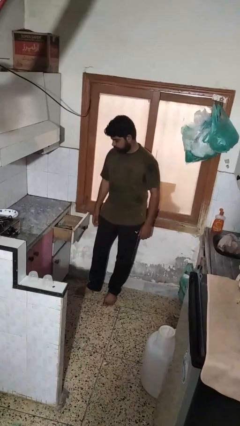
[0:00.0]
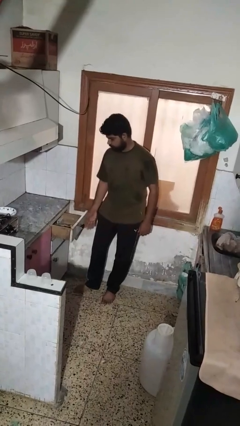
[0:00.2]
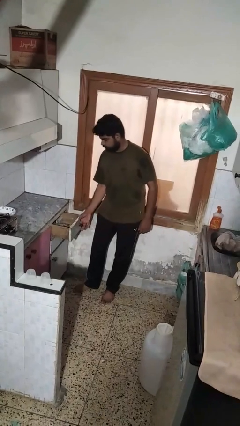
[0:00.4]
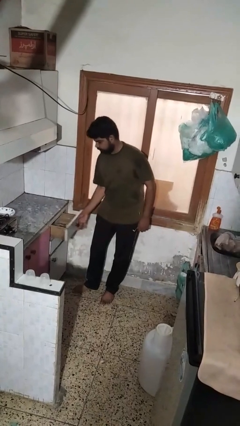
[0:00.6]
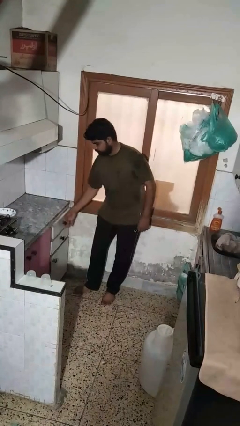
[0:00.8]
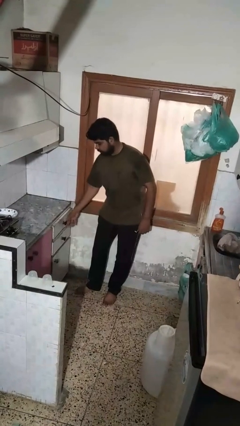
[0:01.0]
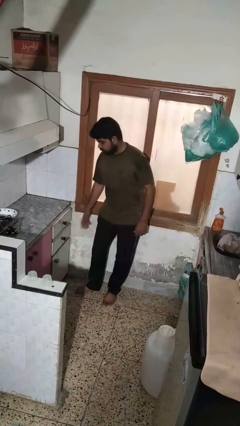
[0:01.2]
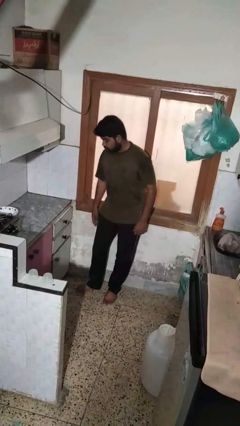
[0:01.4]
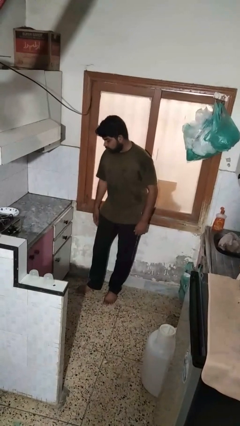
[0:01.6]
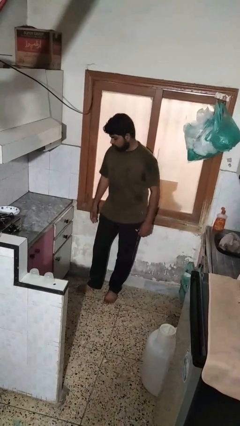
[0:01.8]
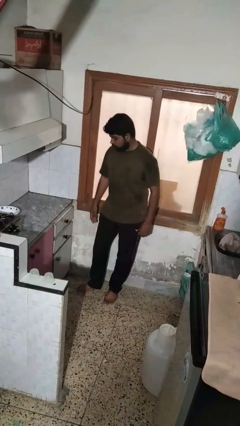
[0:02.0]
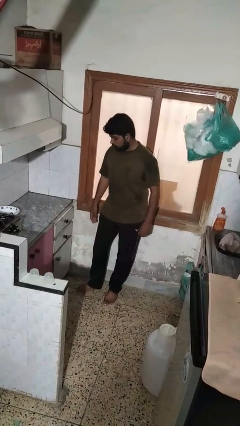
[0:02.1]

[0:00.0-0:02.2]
person closes kitchen drawer

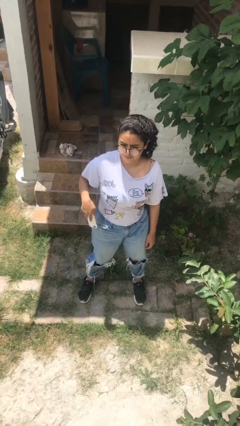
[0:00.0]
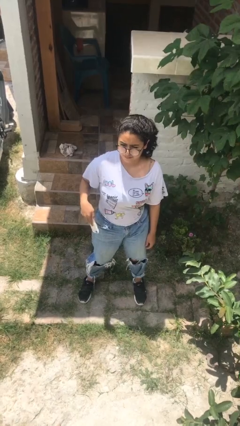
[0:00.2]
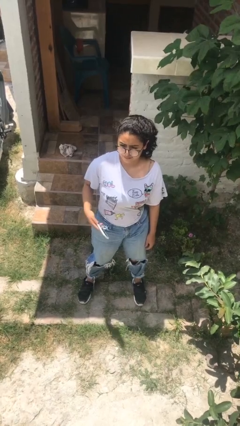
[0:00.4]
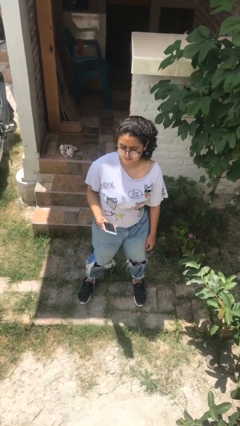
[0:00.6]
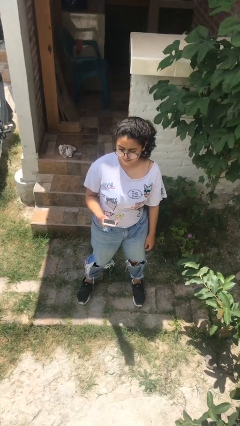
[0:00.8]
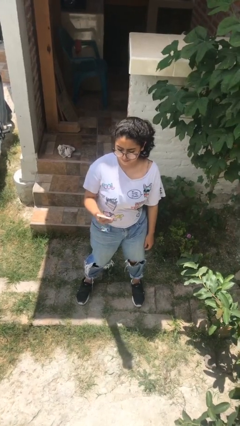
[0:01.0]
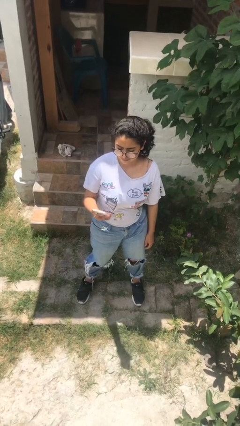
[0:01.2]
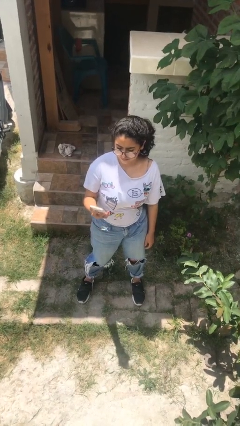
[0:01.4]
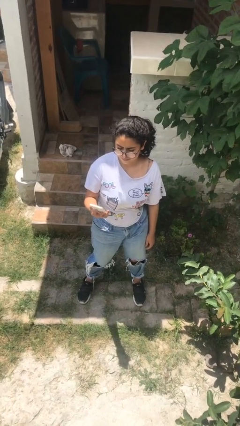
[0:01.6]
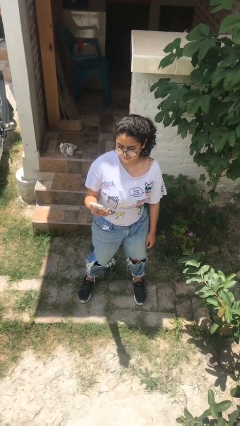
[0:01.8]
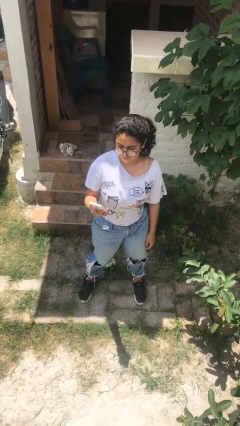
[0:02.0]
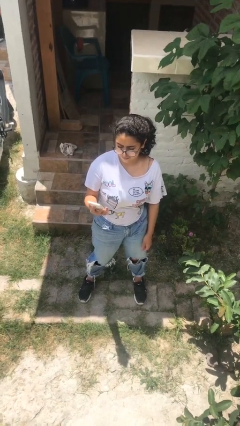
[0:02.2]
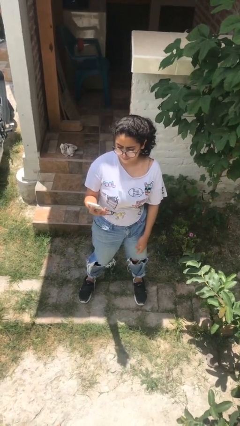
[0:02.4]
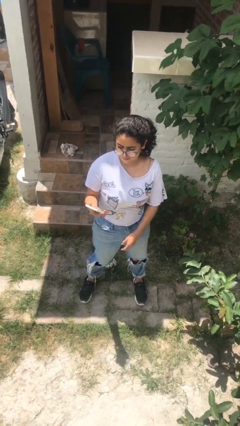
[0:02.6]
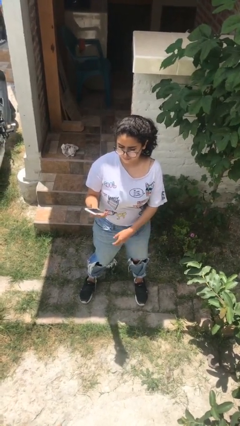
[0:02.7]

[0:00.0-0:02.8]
person puts phone into pocket

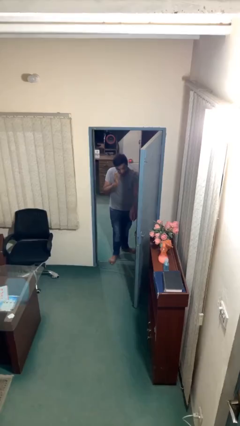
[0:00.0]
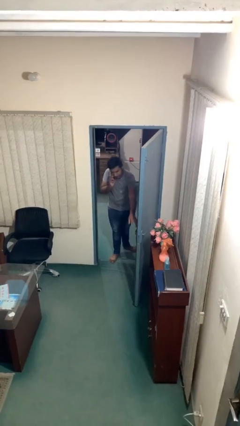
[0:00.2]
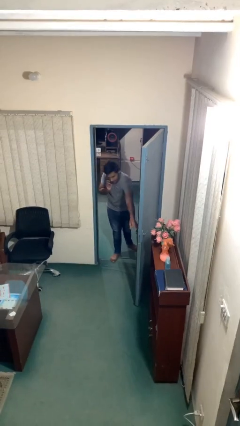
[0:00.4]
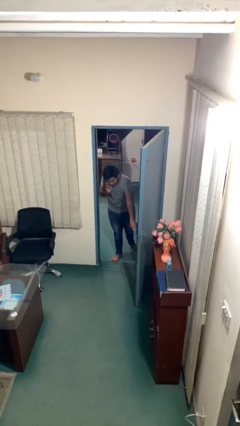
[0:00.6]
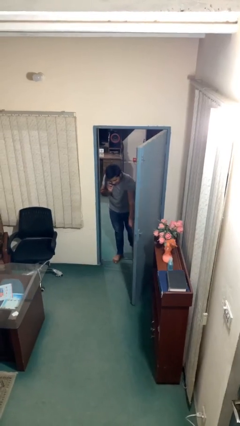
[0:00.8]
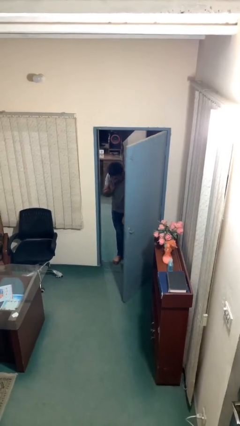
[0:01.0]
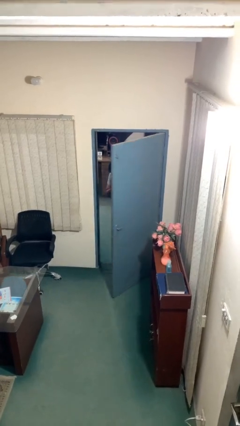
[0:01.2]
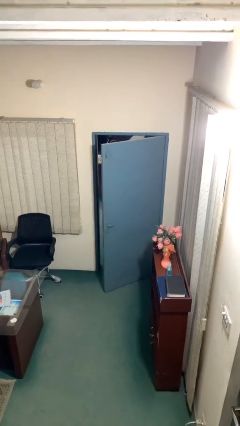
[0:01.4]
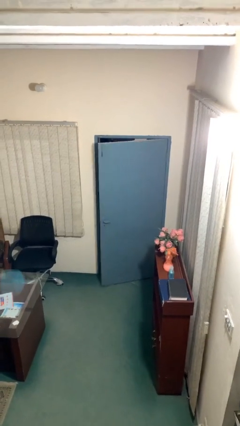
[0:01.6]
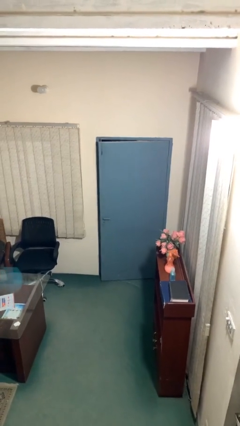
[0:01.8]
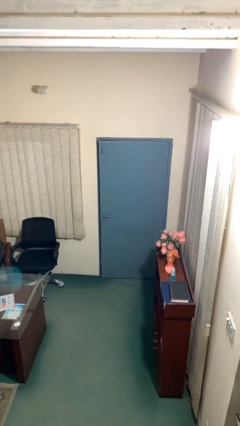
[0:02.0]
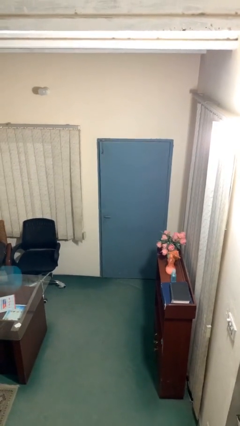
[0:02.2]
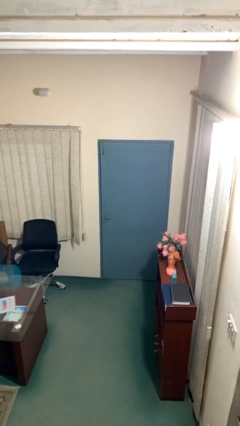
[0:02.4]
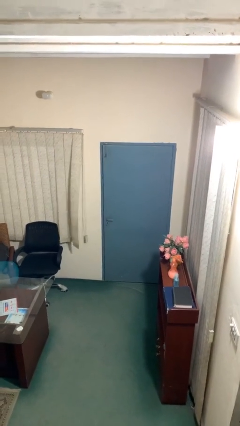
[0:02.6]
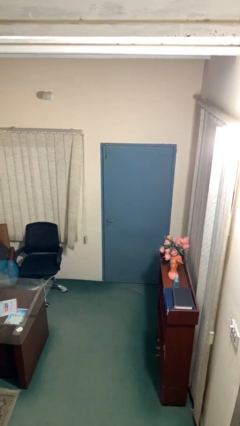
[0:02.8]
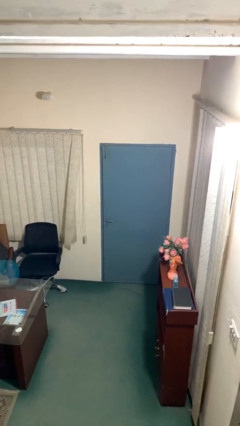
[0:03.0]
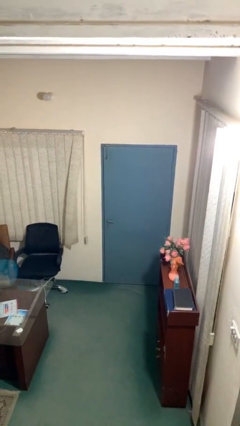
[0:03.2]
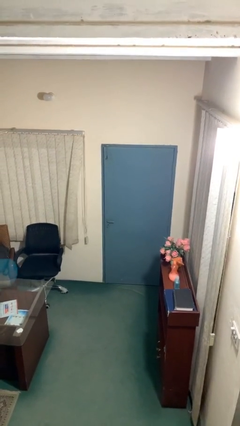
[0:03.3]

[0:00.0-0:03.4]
person closes facility door

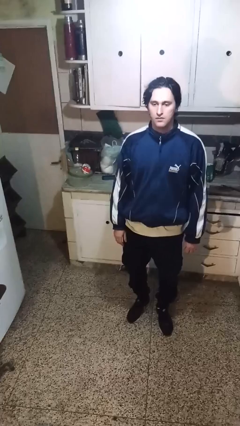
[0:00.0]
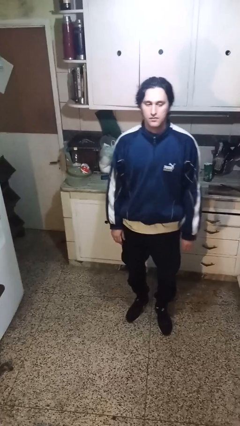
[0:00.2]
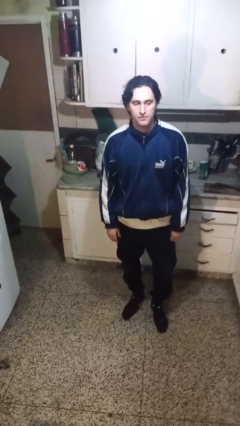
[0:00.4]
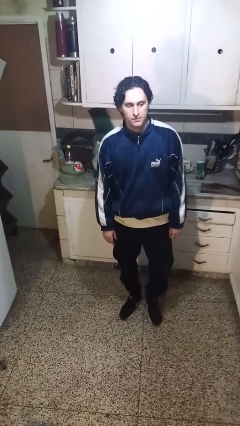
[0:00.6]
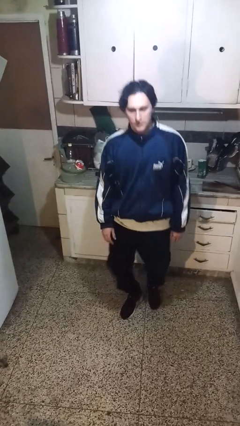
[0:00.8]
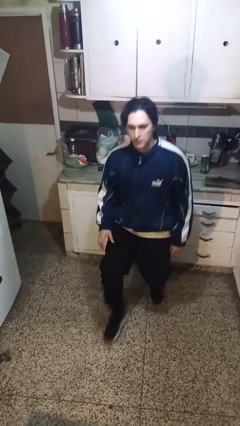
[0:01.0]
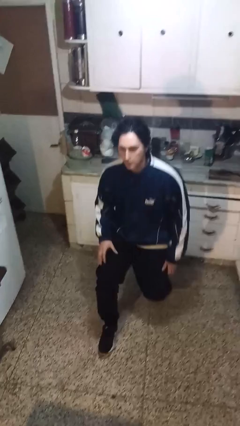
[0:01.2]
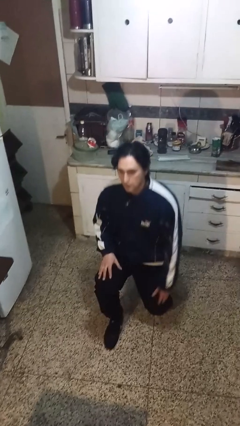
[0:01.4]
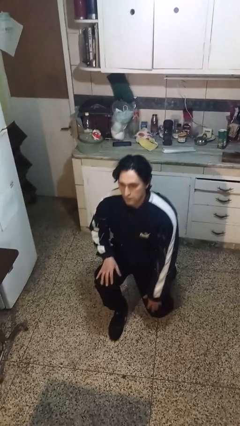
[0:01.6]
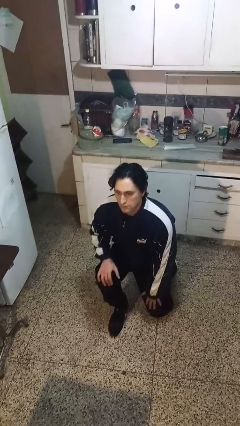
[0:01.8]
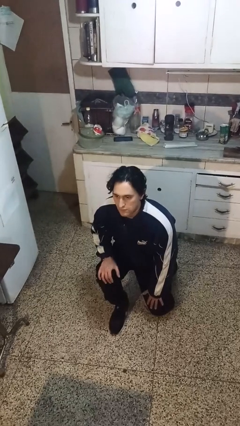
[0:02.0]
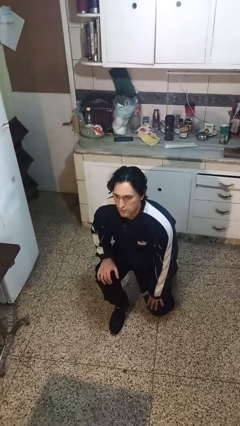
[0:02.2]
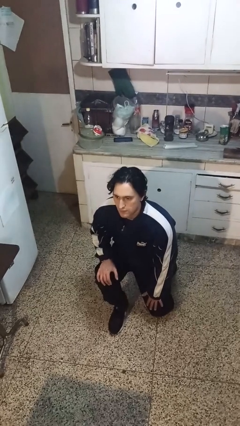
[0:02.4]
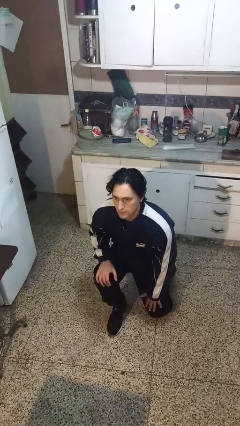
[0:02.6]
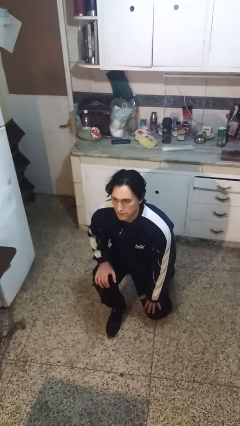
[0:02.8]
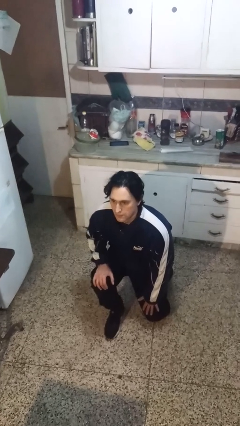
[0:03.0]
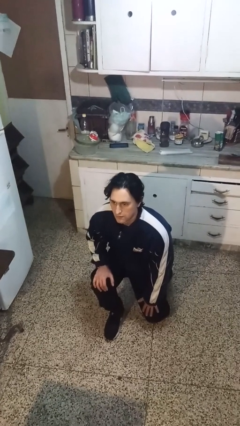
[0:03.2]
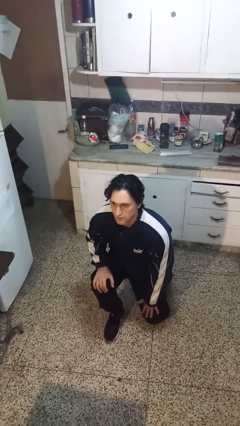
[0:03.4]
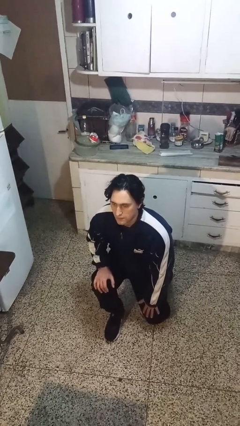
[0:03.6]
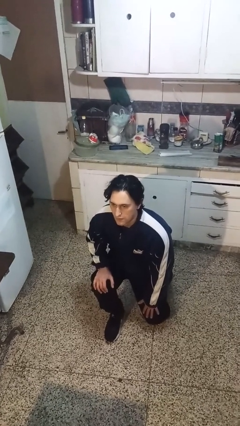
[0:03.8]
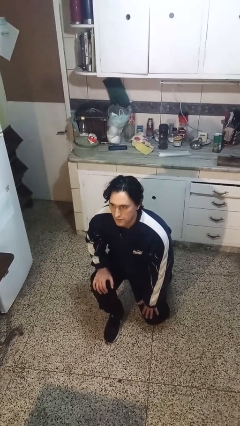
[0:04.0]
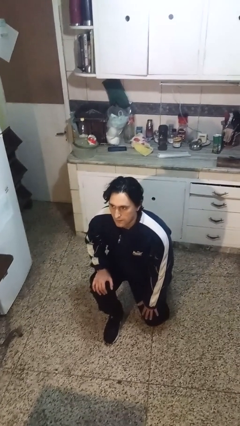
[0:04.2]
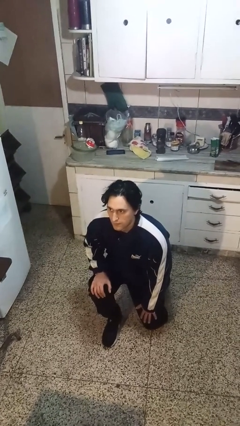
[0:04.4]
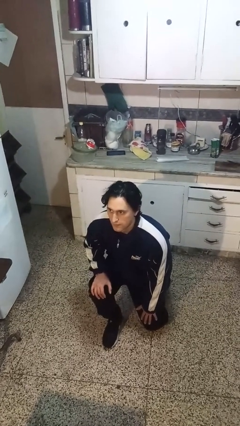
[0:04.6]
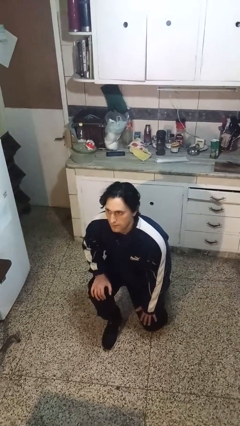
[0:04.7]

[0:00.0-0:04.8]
person kneels

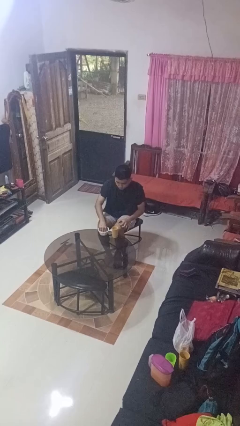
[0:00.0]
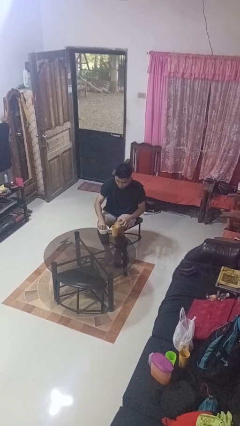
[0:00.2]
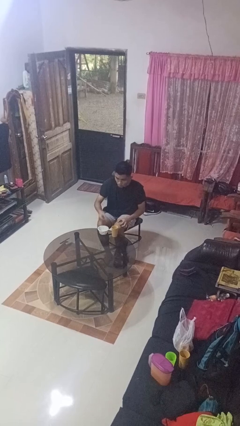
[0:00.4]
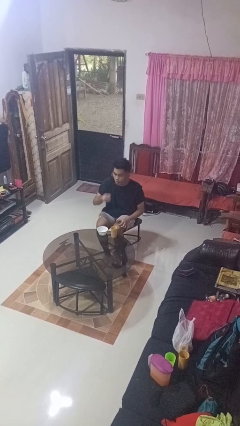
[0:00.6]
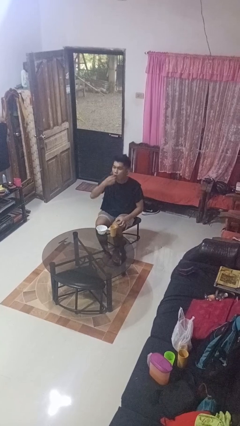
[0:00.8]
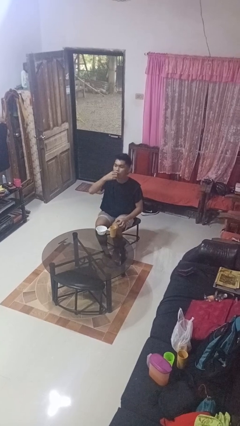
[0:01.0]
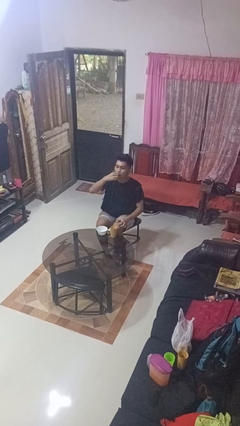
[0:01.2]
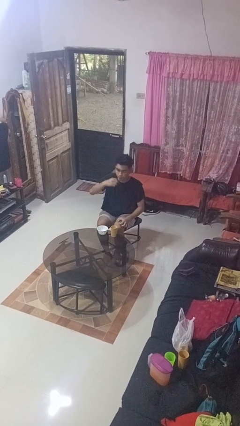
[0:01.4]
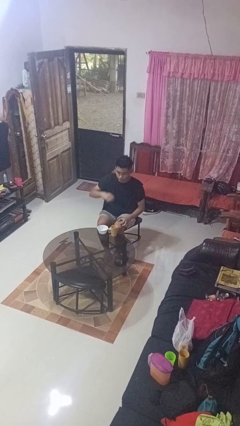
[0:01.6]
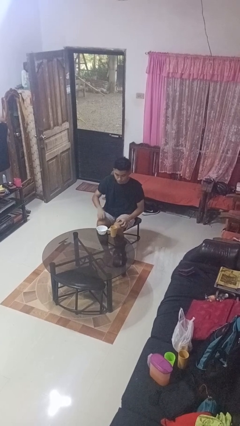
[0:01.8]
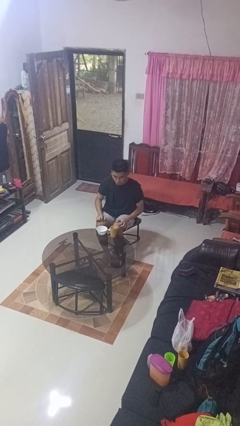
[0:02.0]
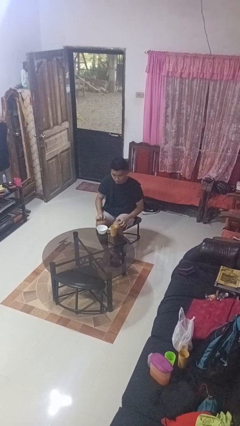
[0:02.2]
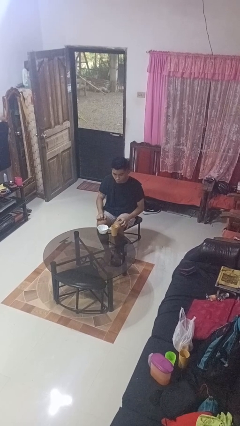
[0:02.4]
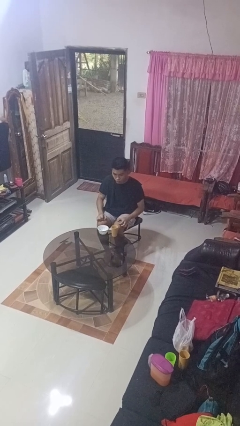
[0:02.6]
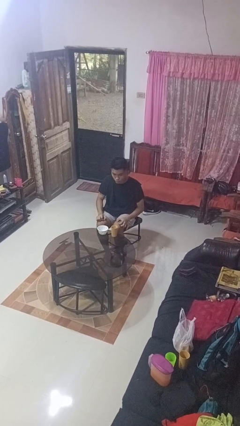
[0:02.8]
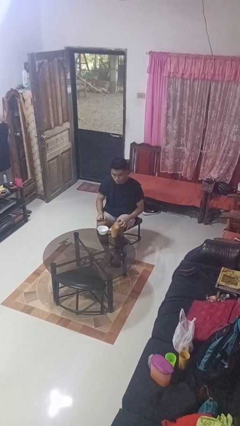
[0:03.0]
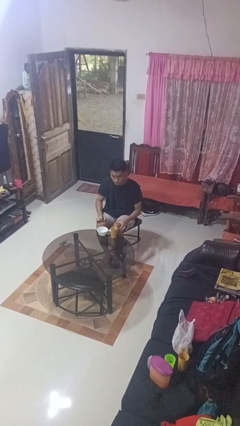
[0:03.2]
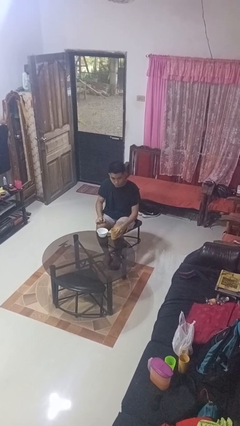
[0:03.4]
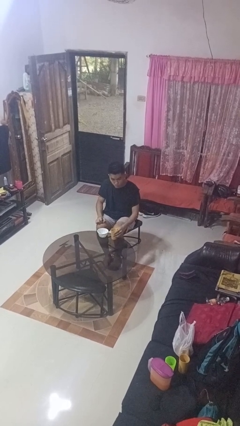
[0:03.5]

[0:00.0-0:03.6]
person takes medicine pills

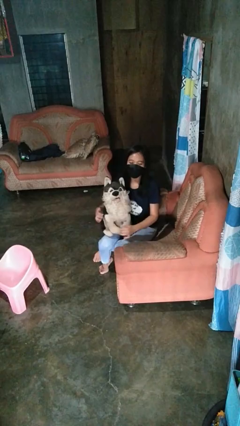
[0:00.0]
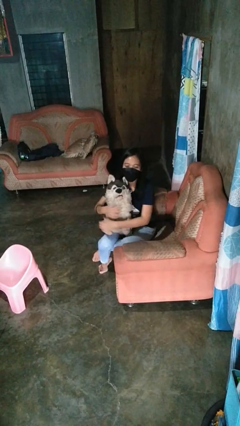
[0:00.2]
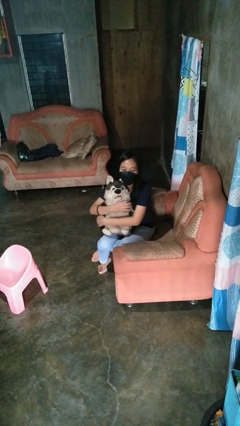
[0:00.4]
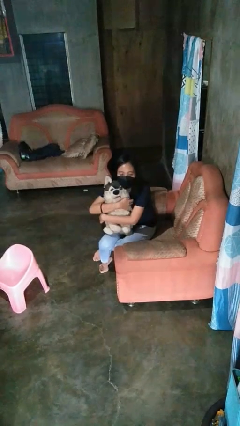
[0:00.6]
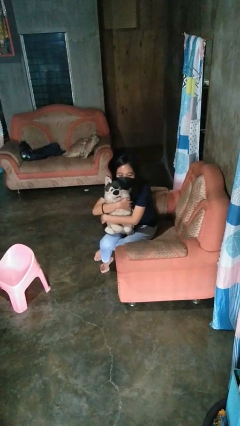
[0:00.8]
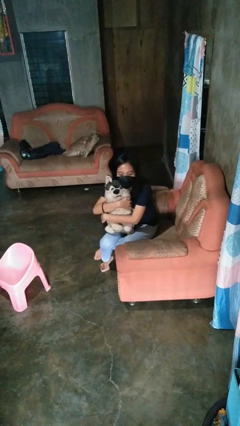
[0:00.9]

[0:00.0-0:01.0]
person hugs stuffed animal
